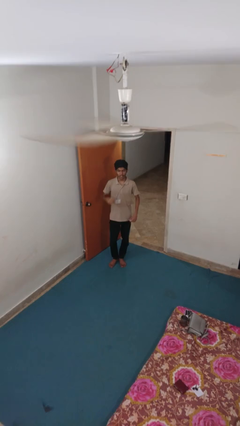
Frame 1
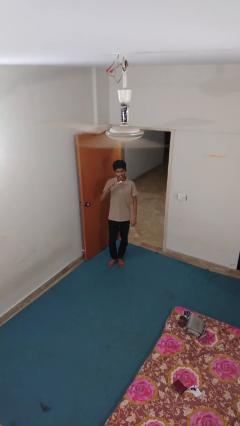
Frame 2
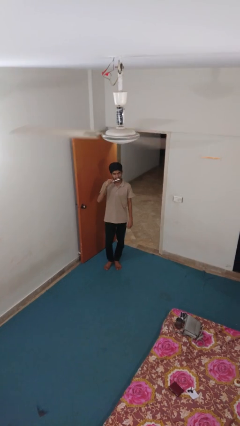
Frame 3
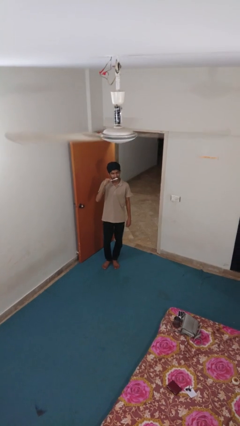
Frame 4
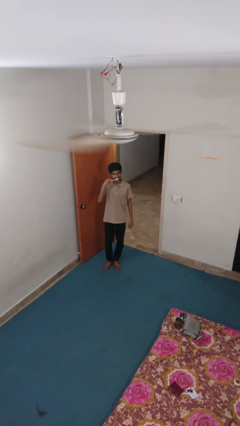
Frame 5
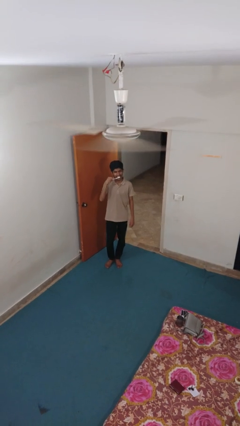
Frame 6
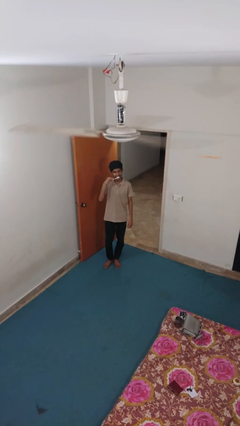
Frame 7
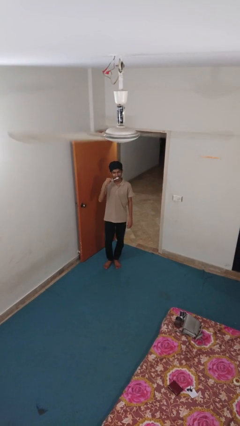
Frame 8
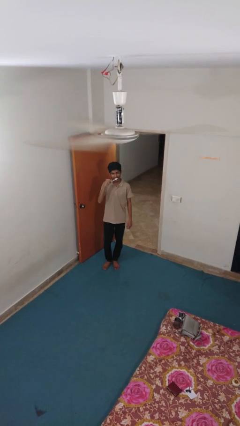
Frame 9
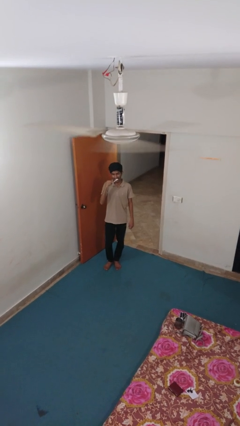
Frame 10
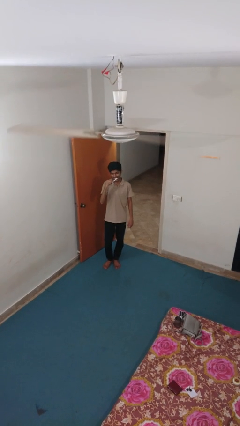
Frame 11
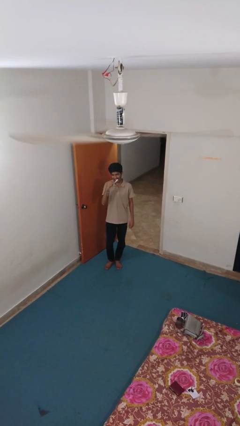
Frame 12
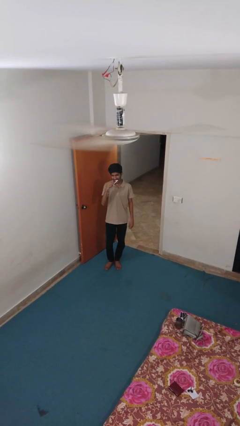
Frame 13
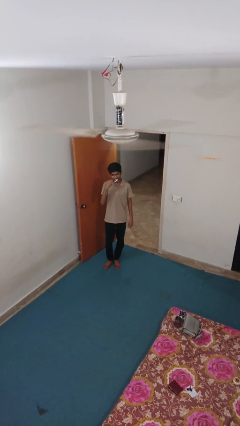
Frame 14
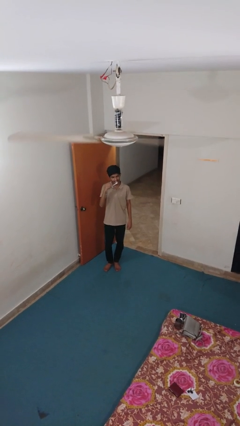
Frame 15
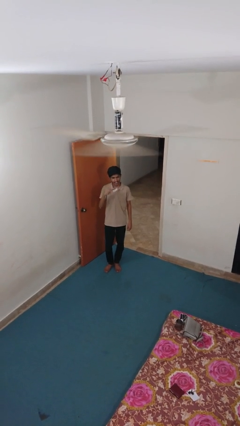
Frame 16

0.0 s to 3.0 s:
person brushes teeth

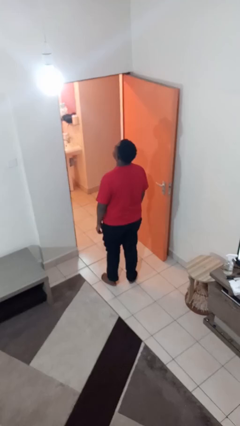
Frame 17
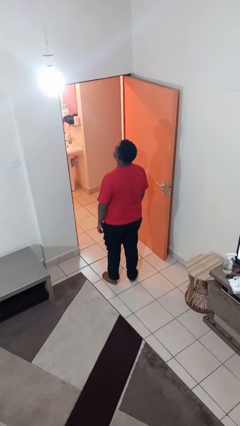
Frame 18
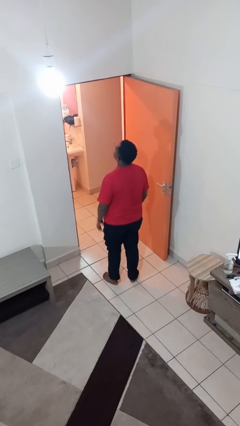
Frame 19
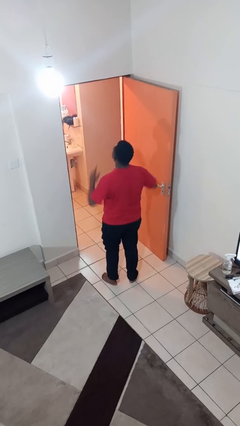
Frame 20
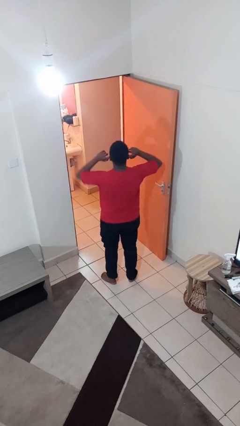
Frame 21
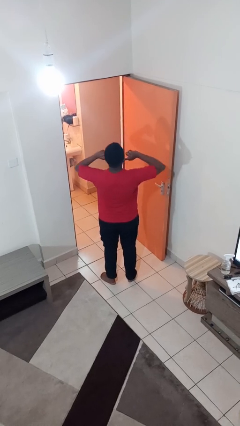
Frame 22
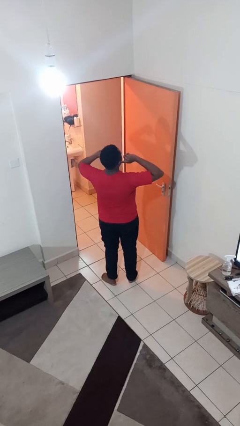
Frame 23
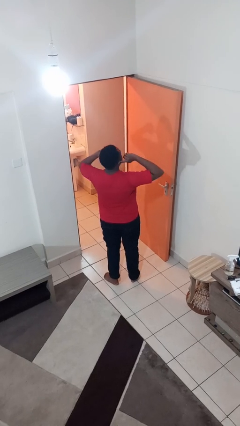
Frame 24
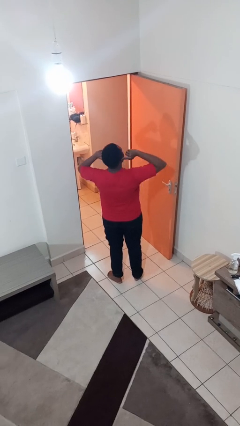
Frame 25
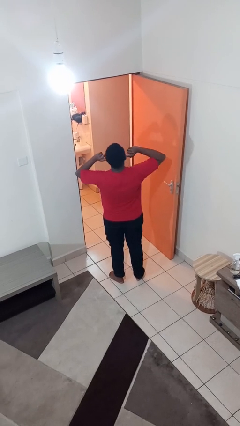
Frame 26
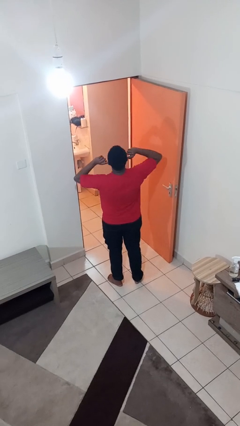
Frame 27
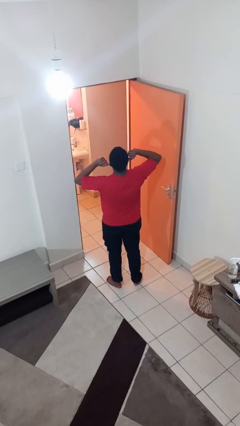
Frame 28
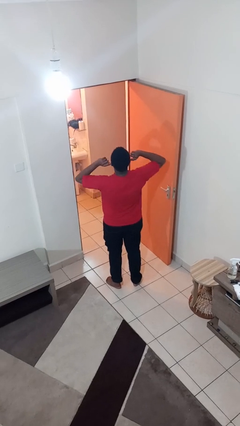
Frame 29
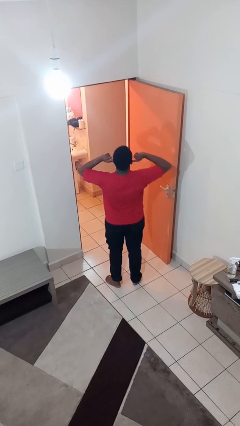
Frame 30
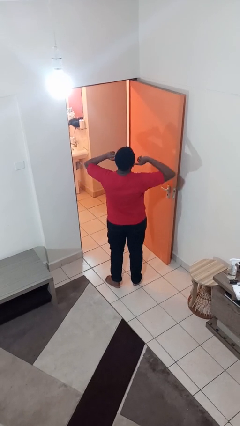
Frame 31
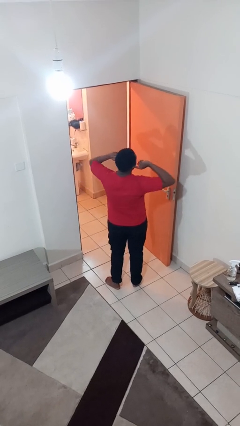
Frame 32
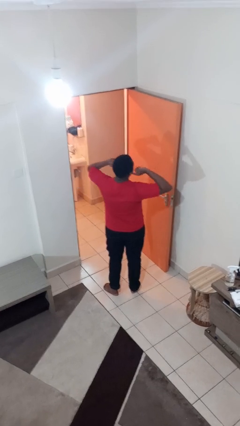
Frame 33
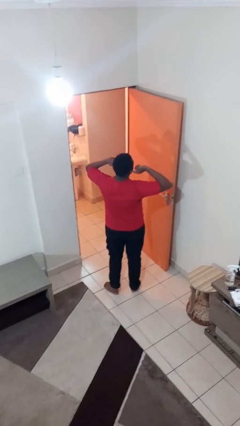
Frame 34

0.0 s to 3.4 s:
person puts fingers in ear

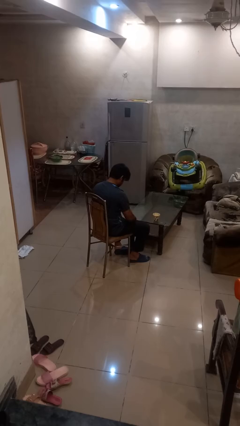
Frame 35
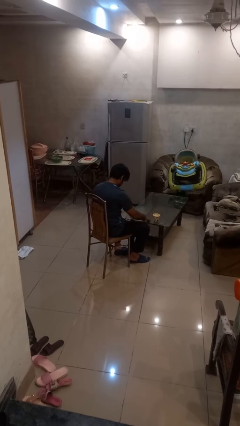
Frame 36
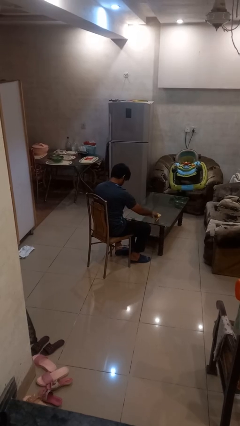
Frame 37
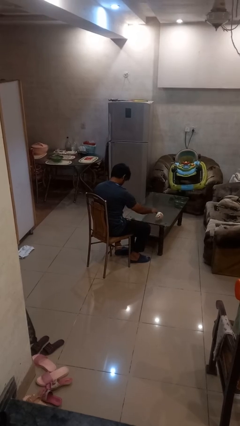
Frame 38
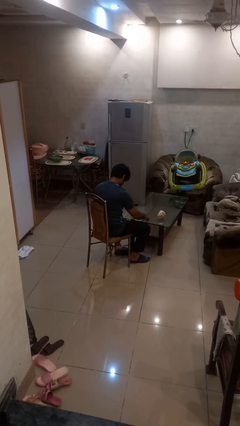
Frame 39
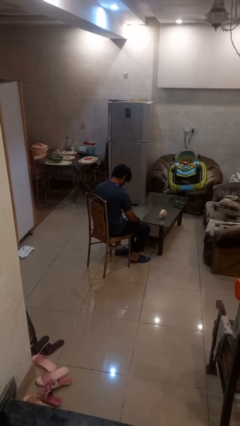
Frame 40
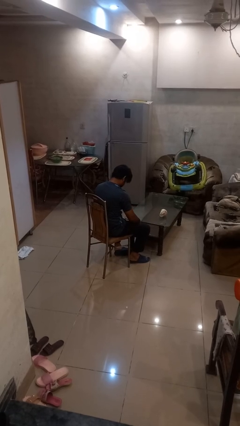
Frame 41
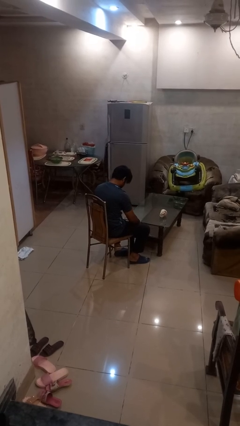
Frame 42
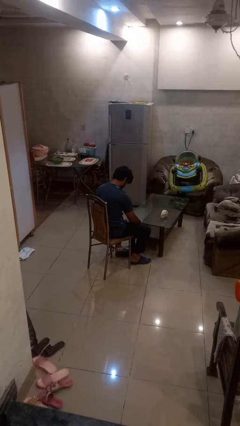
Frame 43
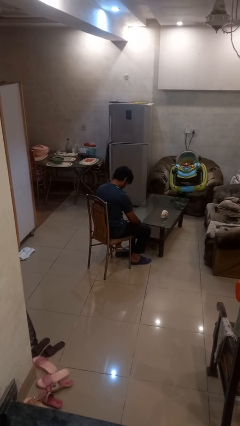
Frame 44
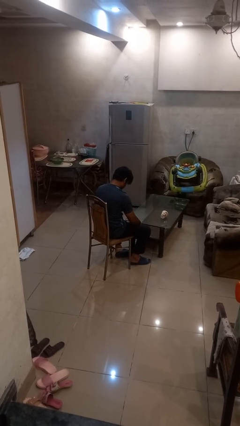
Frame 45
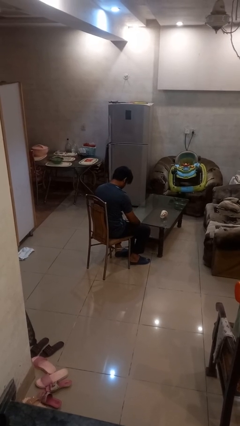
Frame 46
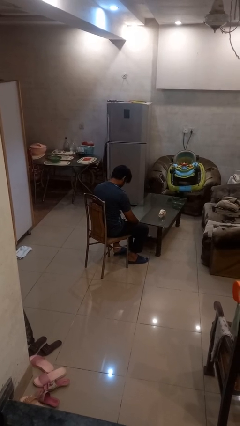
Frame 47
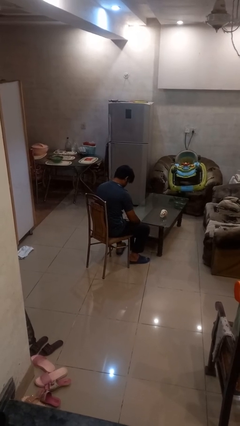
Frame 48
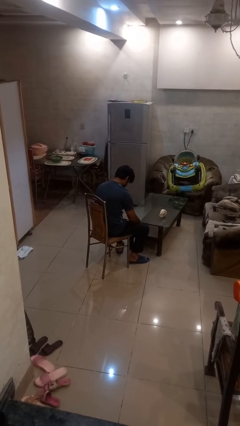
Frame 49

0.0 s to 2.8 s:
person knocks over glass

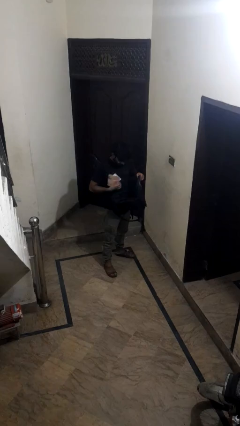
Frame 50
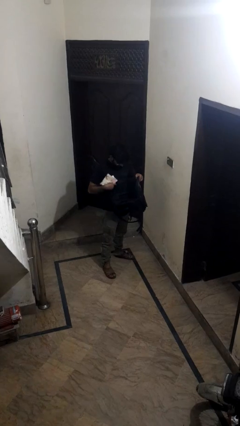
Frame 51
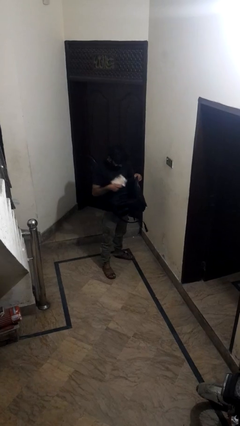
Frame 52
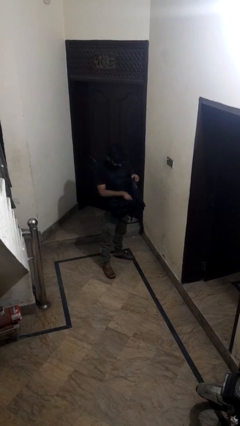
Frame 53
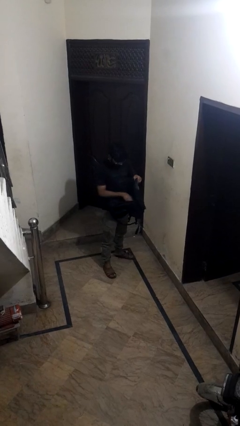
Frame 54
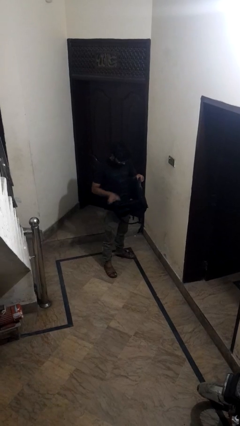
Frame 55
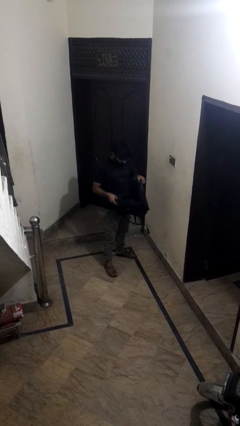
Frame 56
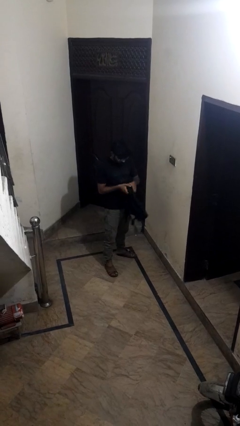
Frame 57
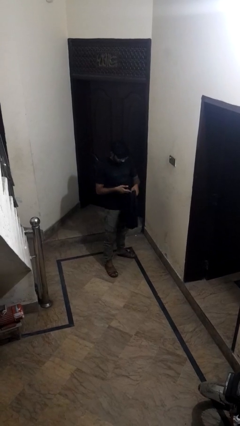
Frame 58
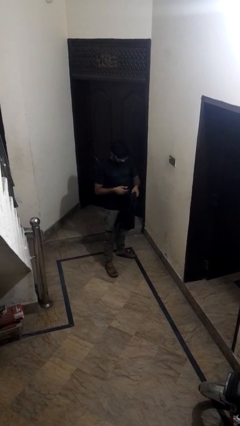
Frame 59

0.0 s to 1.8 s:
person puts object into backpack

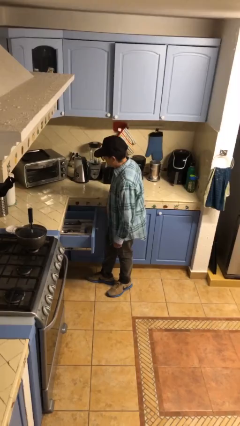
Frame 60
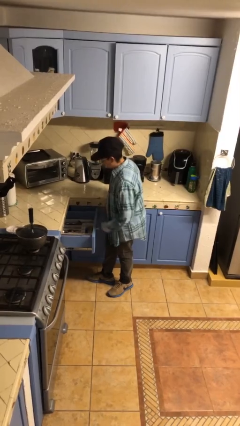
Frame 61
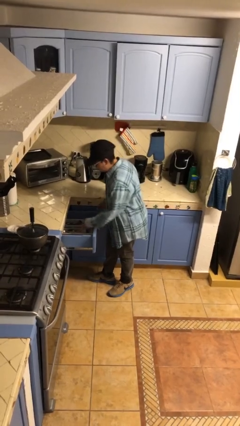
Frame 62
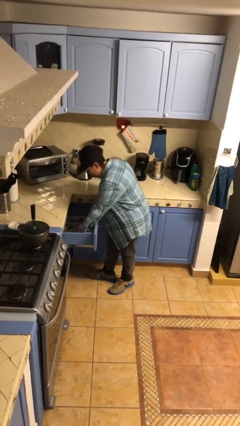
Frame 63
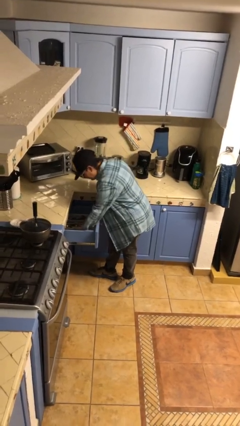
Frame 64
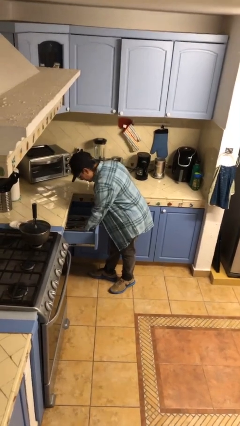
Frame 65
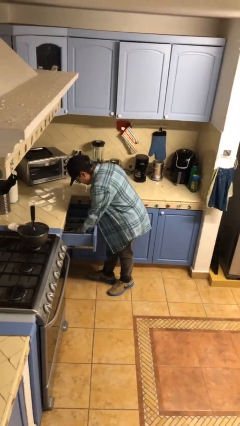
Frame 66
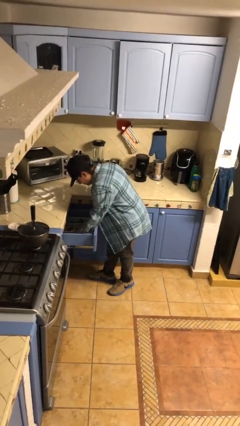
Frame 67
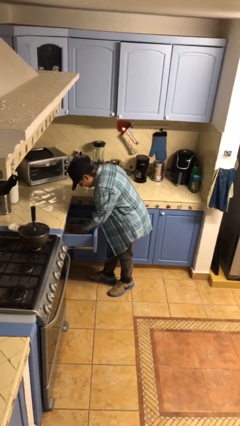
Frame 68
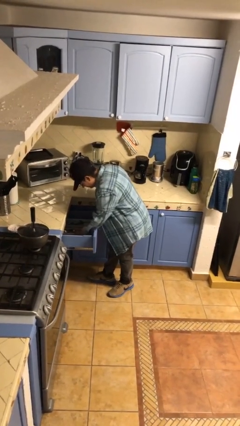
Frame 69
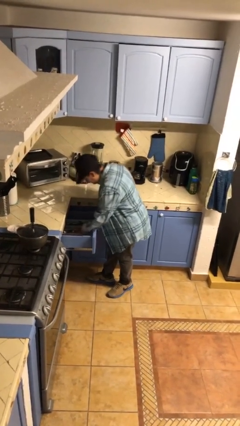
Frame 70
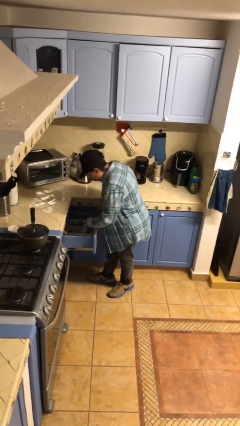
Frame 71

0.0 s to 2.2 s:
person searches in kitchen drawer

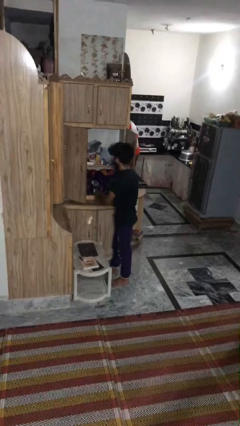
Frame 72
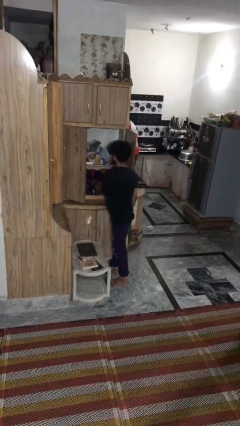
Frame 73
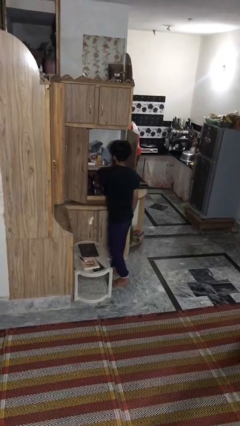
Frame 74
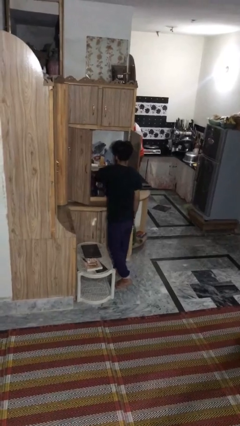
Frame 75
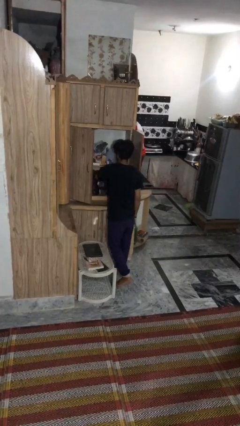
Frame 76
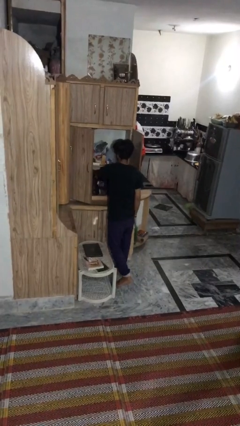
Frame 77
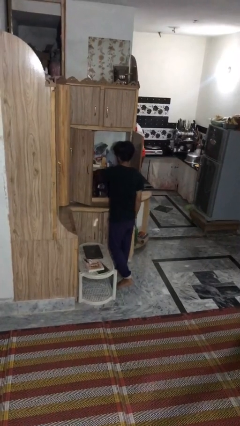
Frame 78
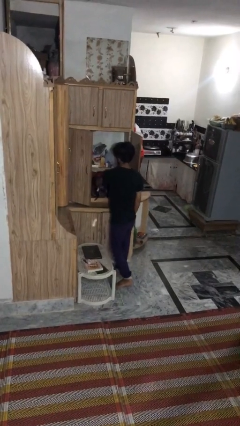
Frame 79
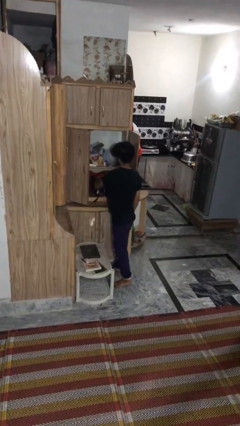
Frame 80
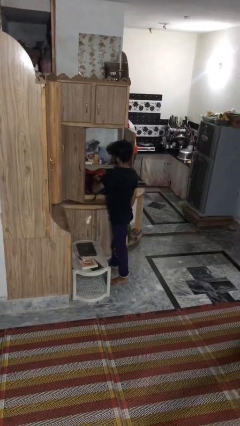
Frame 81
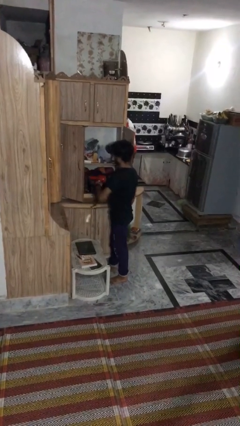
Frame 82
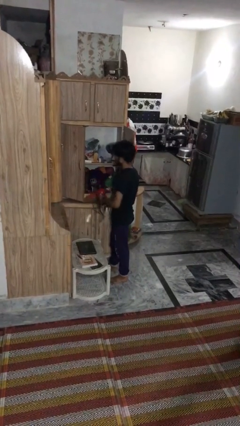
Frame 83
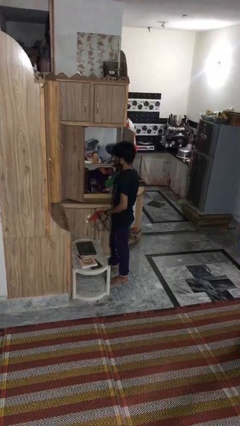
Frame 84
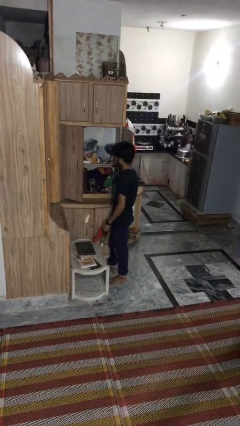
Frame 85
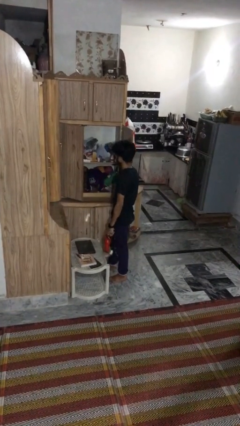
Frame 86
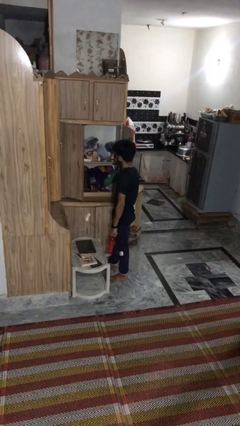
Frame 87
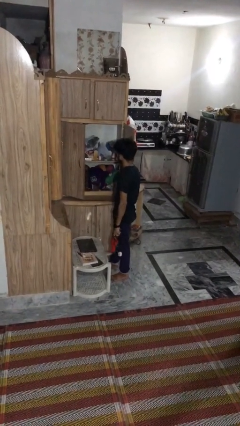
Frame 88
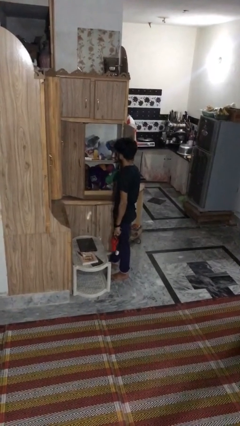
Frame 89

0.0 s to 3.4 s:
person picks up object from cabinet

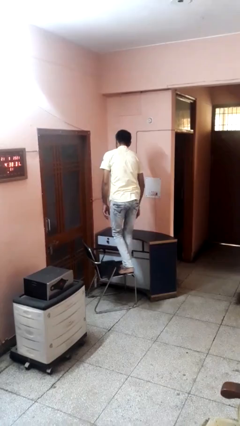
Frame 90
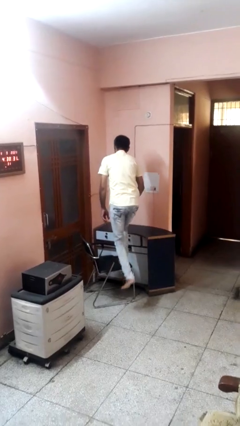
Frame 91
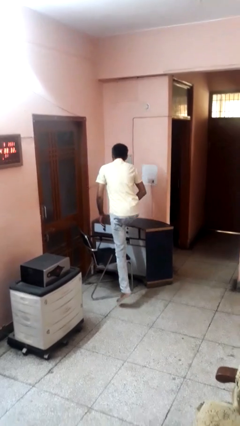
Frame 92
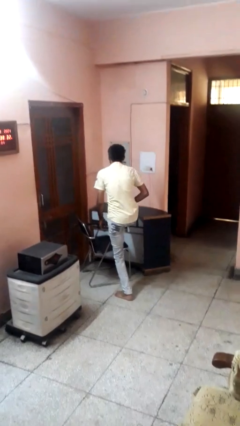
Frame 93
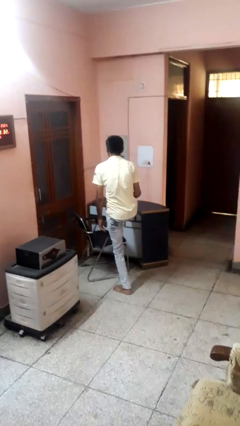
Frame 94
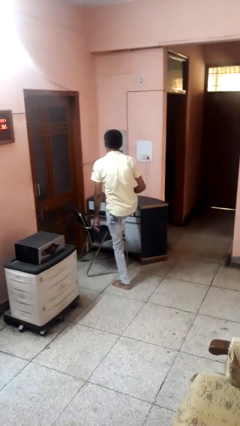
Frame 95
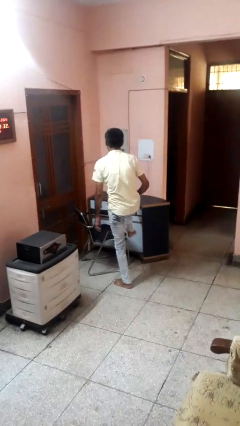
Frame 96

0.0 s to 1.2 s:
person climbs off chair
